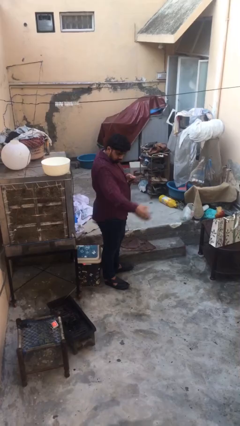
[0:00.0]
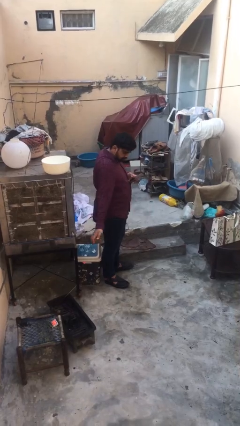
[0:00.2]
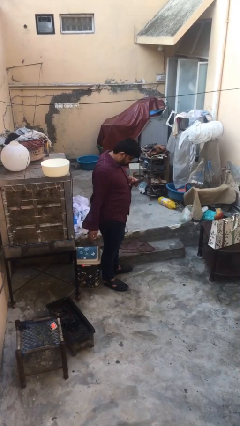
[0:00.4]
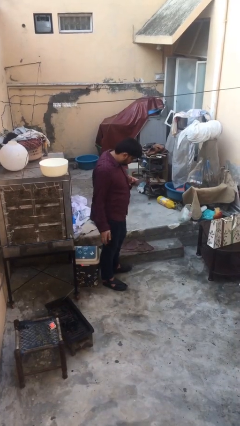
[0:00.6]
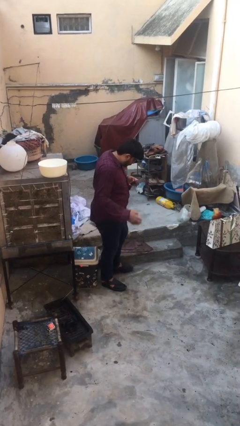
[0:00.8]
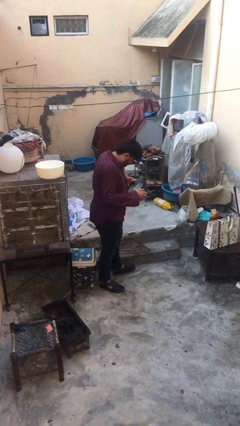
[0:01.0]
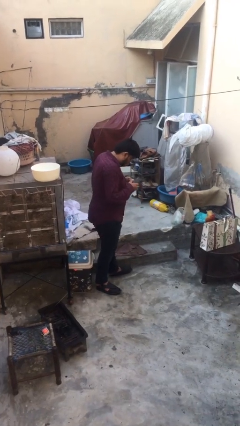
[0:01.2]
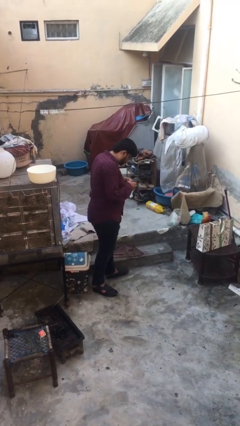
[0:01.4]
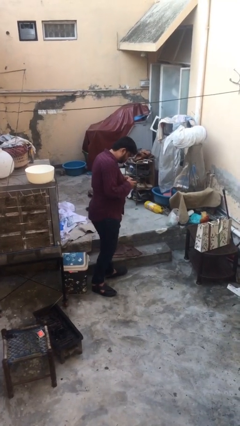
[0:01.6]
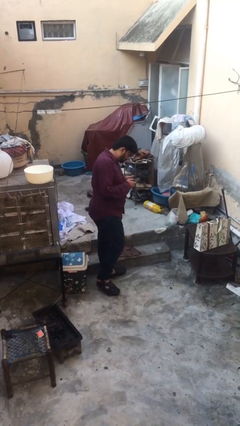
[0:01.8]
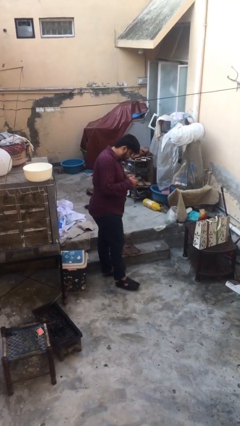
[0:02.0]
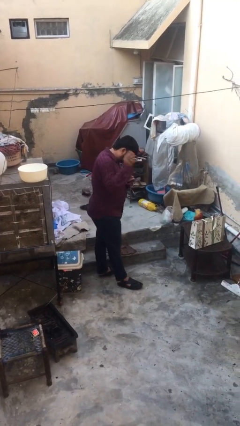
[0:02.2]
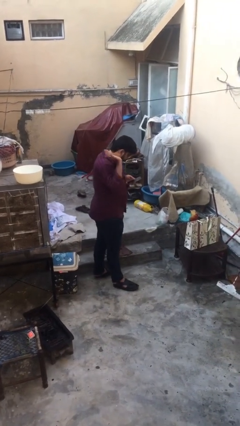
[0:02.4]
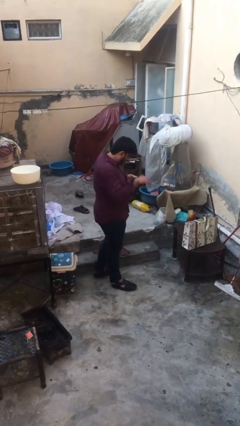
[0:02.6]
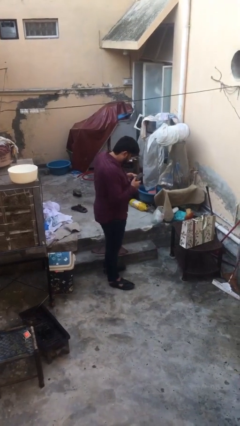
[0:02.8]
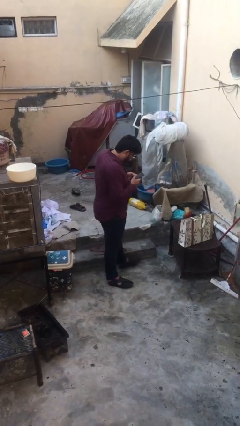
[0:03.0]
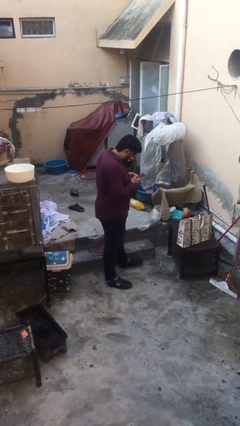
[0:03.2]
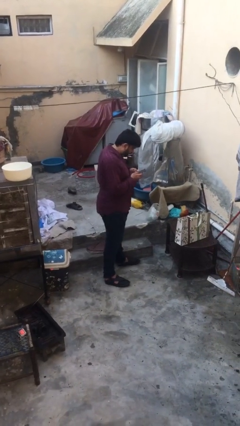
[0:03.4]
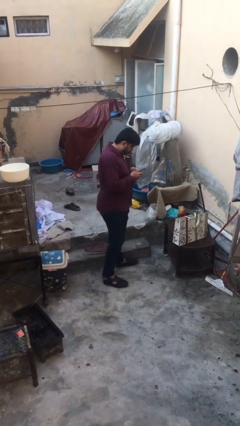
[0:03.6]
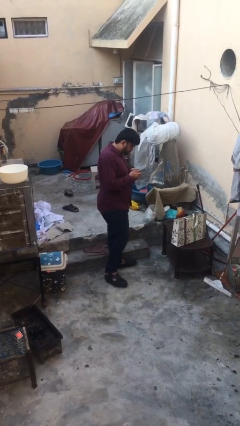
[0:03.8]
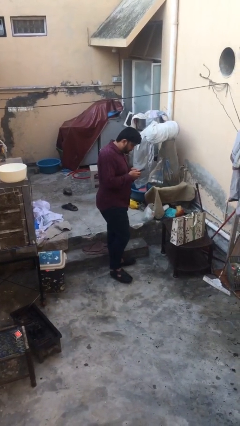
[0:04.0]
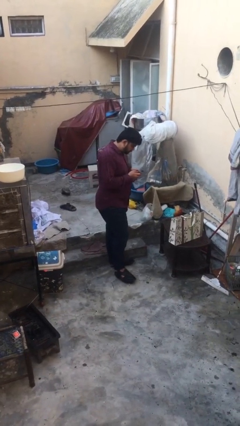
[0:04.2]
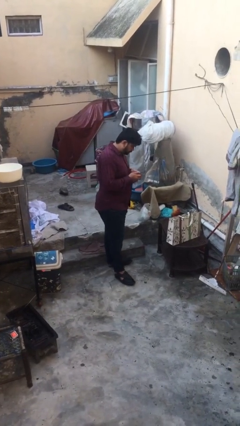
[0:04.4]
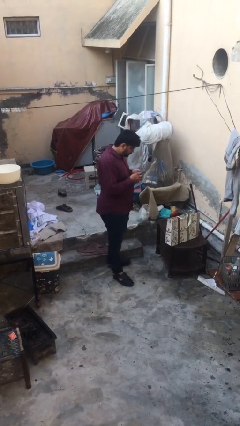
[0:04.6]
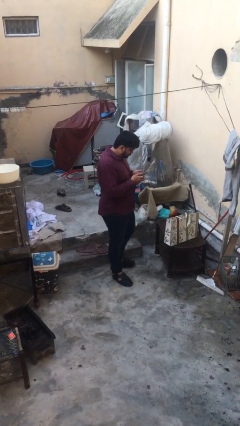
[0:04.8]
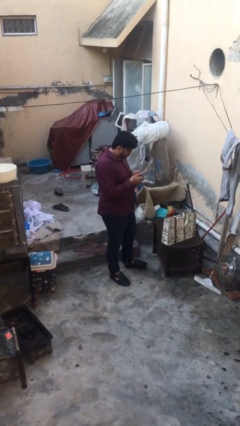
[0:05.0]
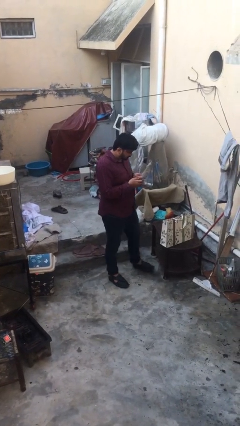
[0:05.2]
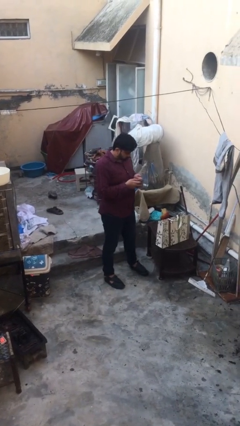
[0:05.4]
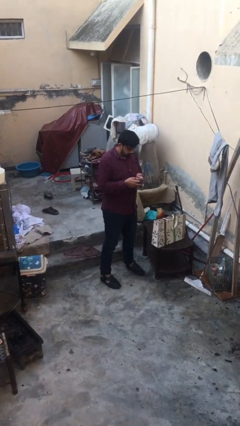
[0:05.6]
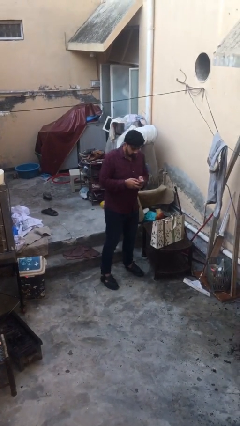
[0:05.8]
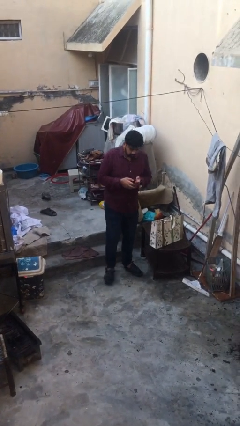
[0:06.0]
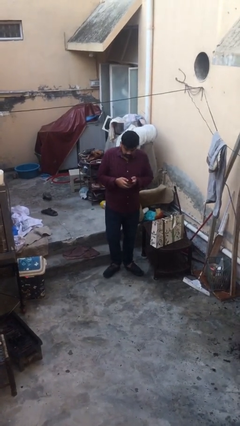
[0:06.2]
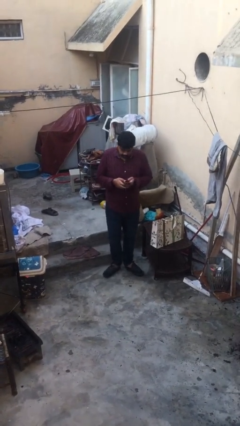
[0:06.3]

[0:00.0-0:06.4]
person texts on phone

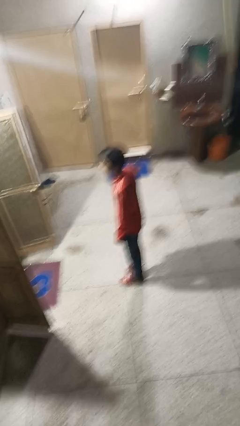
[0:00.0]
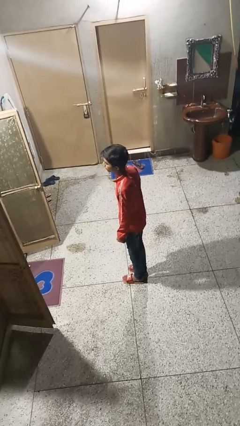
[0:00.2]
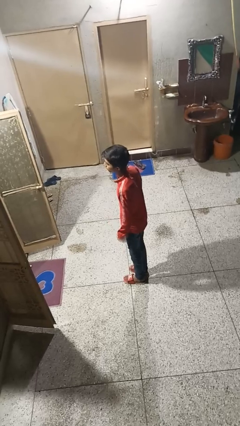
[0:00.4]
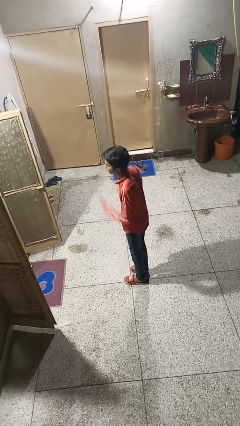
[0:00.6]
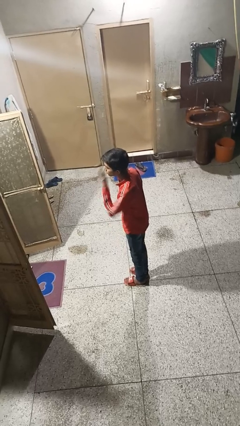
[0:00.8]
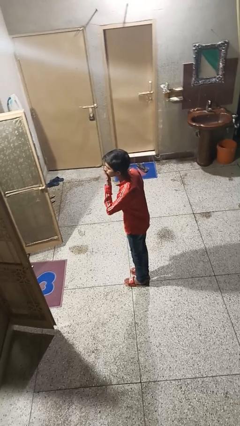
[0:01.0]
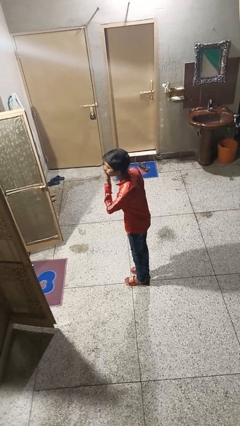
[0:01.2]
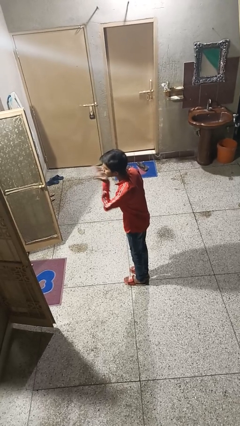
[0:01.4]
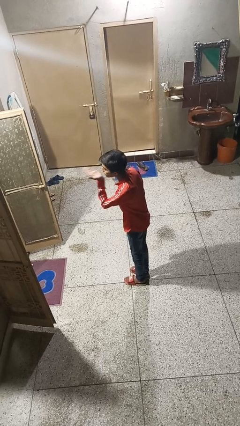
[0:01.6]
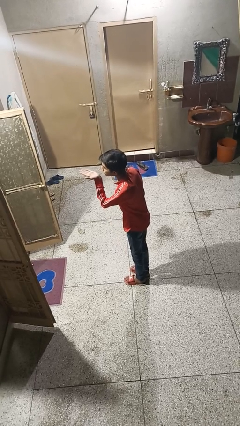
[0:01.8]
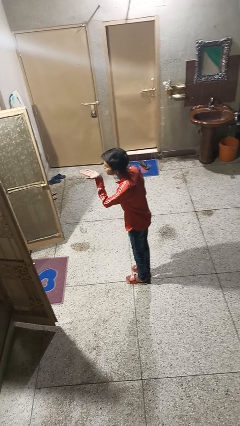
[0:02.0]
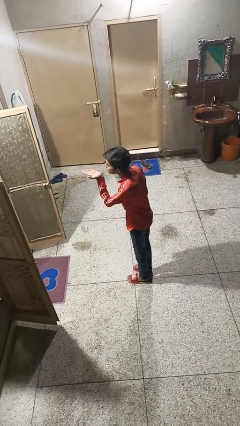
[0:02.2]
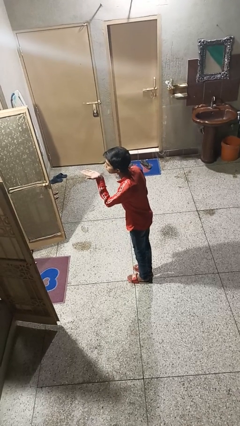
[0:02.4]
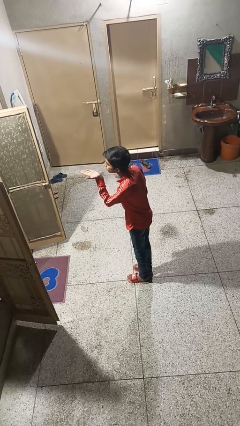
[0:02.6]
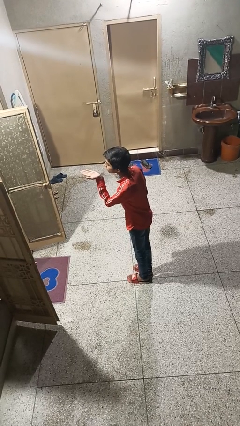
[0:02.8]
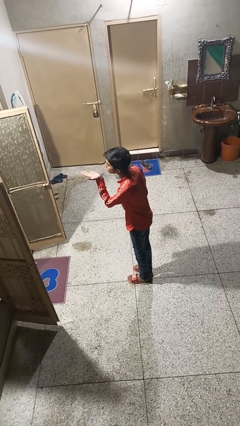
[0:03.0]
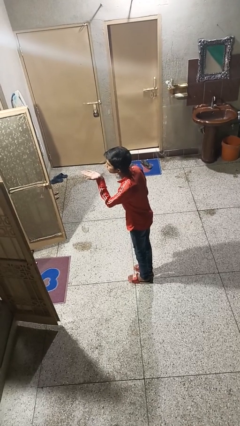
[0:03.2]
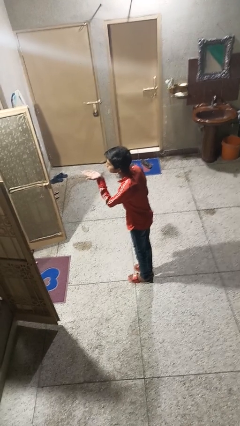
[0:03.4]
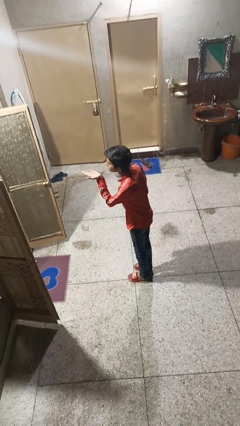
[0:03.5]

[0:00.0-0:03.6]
person gestures blow kiss

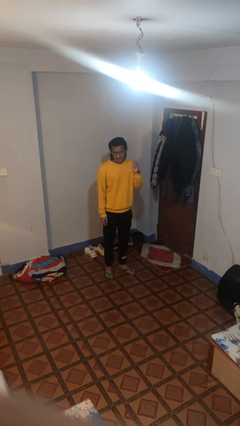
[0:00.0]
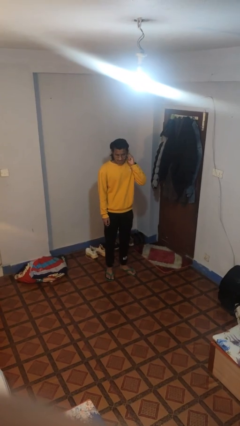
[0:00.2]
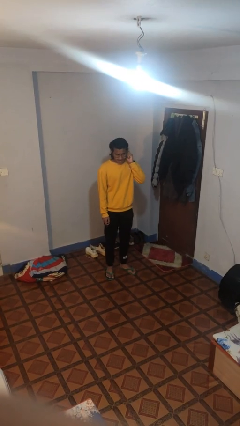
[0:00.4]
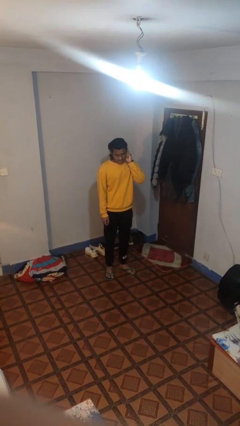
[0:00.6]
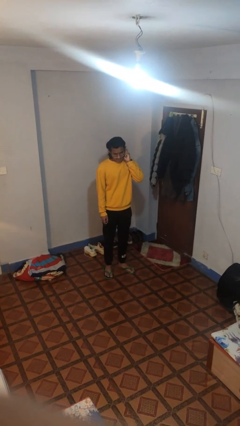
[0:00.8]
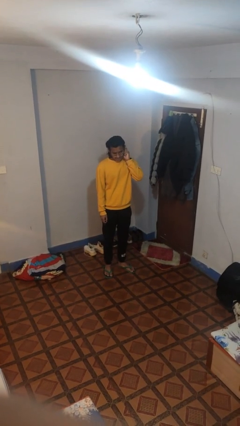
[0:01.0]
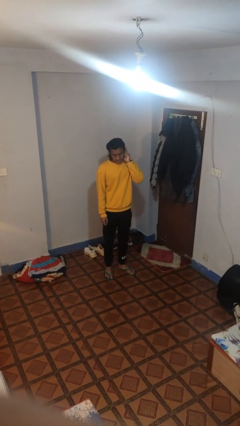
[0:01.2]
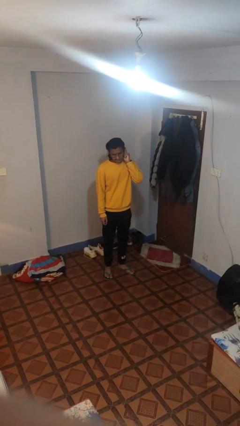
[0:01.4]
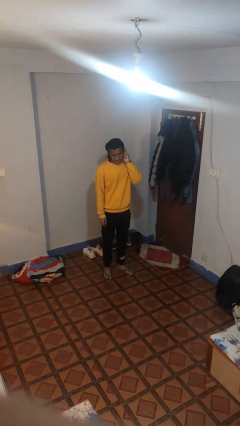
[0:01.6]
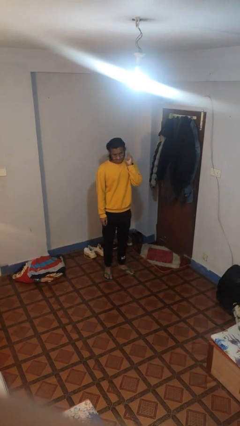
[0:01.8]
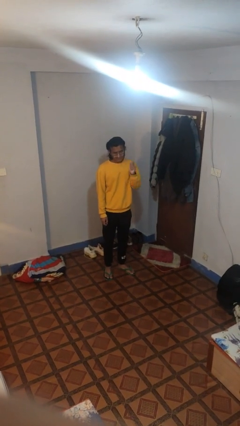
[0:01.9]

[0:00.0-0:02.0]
person puts on earrings

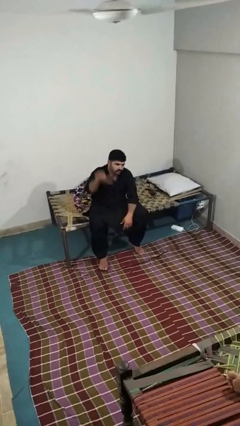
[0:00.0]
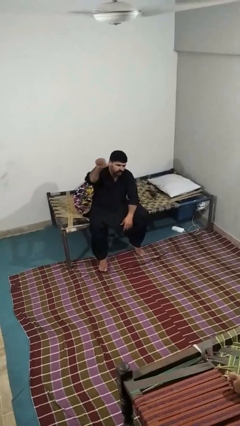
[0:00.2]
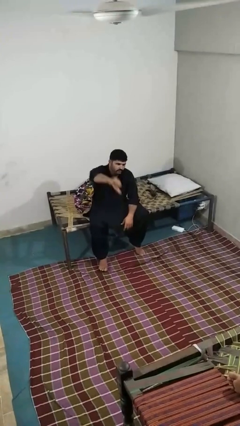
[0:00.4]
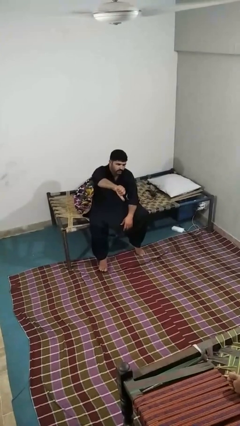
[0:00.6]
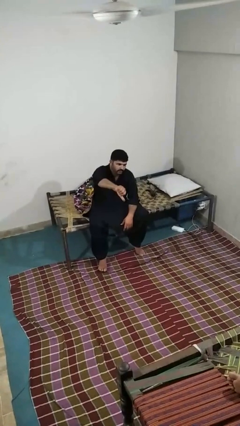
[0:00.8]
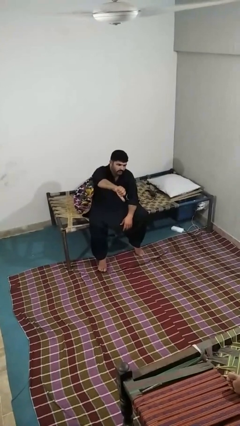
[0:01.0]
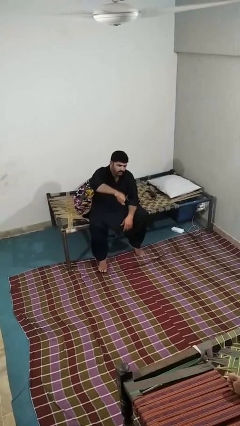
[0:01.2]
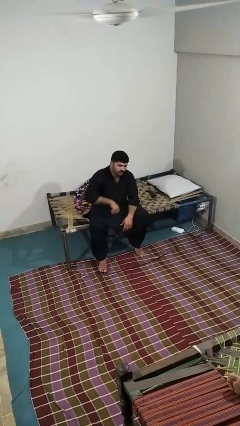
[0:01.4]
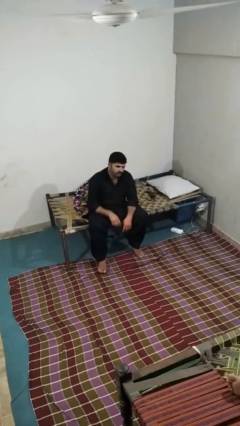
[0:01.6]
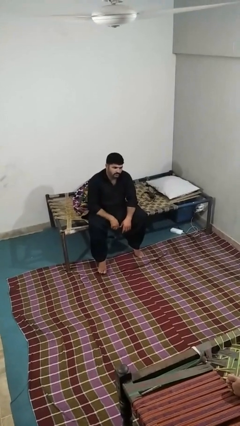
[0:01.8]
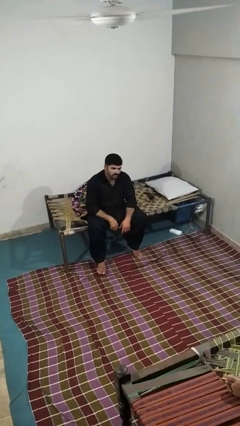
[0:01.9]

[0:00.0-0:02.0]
person gestures thumbs down

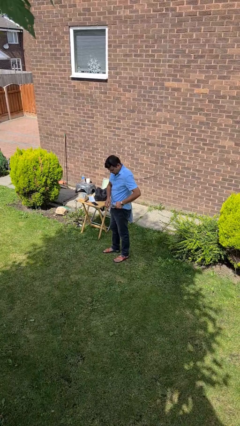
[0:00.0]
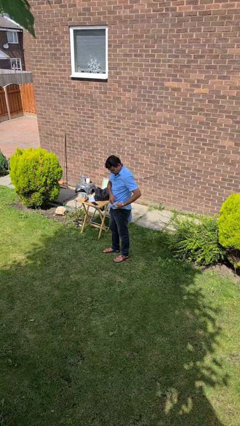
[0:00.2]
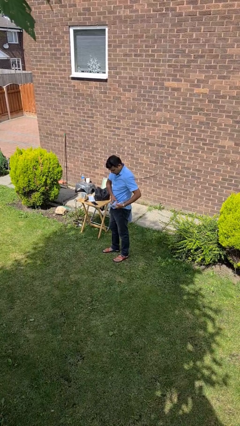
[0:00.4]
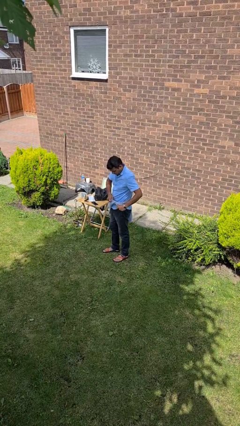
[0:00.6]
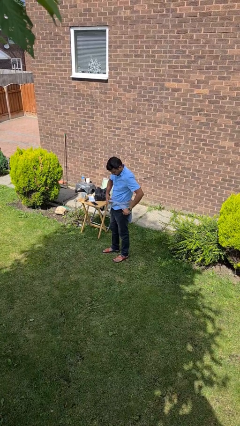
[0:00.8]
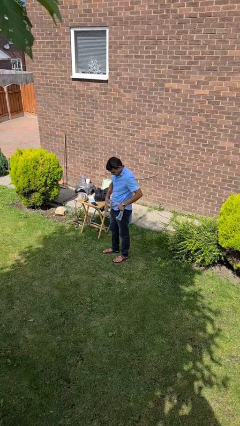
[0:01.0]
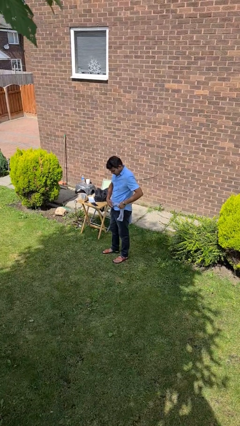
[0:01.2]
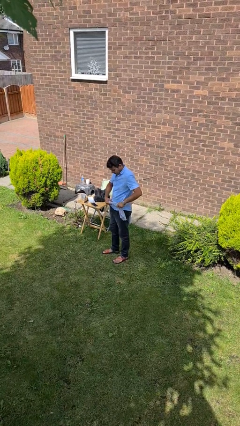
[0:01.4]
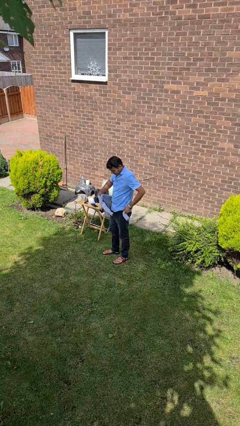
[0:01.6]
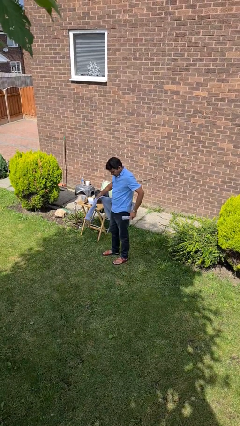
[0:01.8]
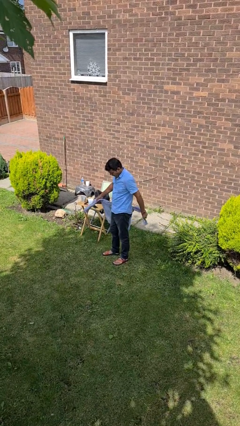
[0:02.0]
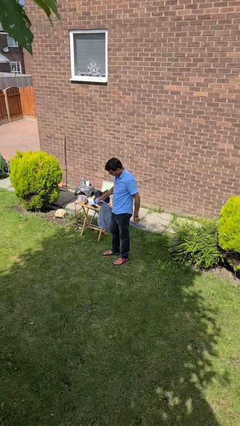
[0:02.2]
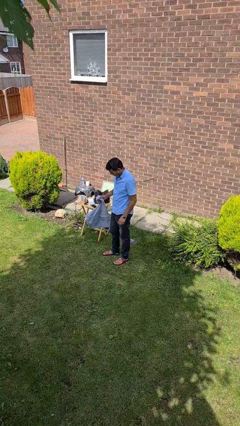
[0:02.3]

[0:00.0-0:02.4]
person unties jacket around waist

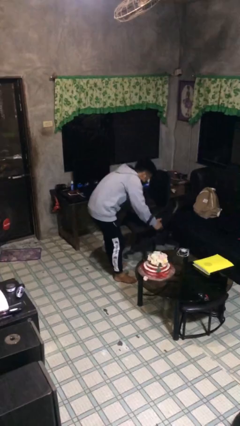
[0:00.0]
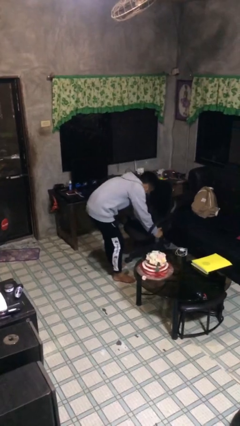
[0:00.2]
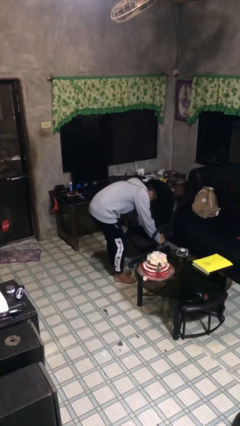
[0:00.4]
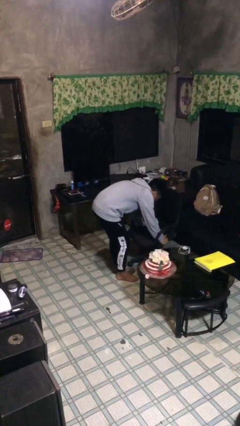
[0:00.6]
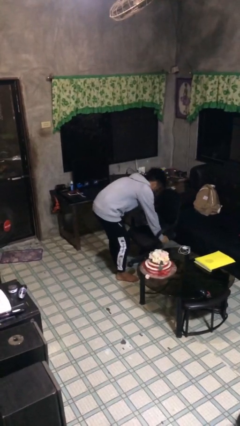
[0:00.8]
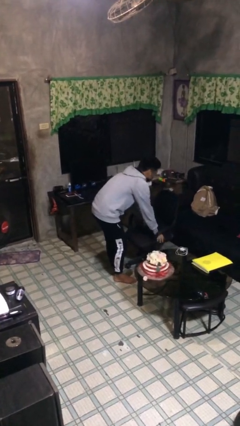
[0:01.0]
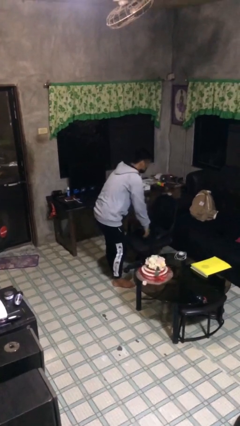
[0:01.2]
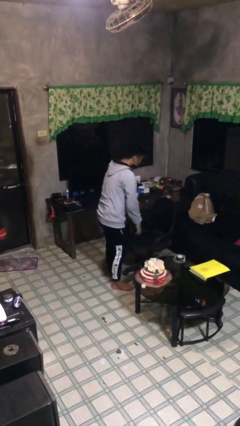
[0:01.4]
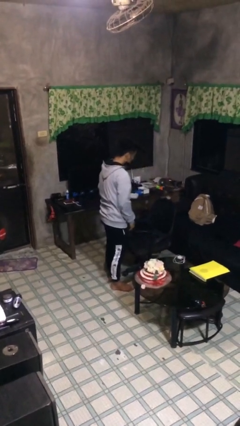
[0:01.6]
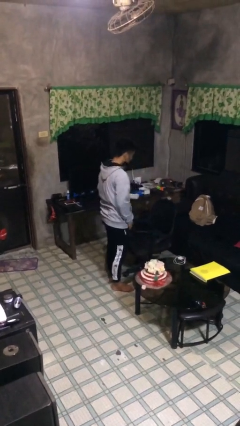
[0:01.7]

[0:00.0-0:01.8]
person puts down object on floor
